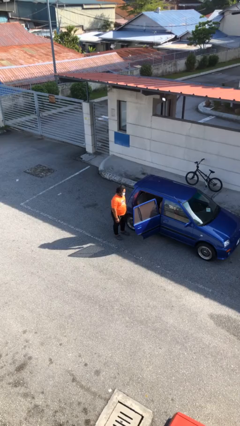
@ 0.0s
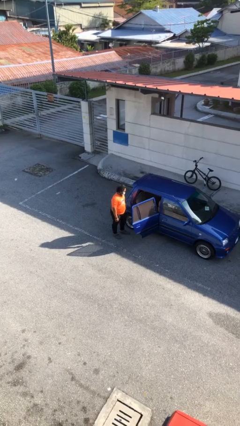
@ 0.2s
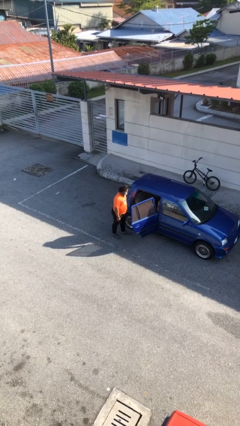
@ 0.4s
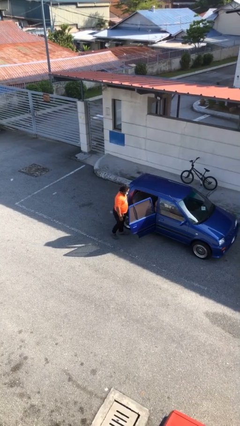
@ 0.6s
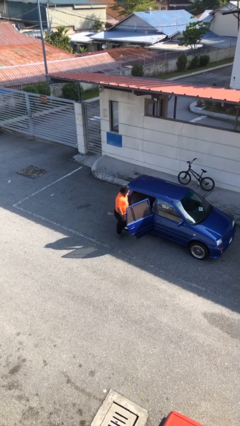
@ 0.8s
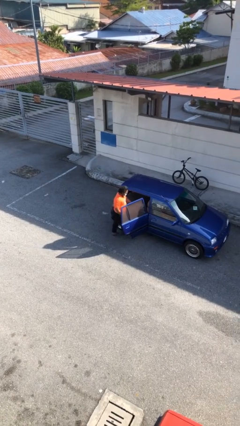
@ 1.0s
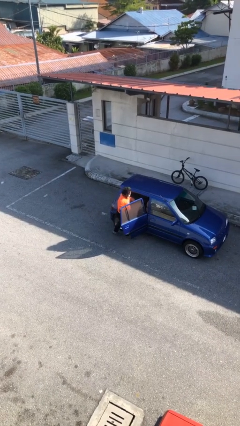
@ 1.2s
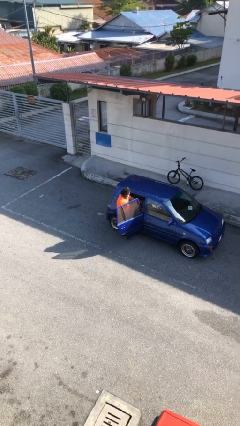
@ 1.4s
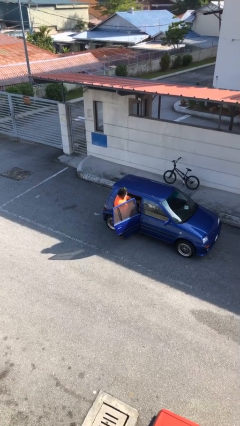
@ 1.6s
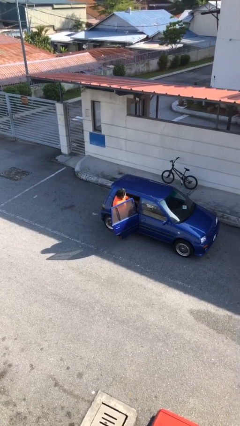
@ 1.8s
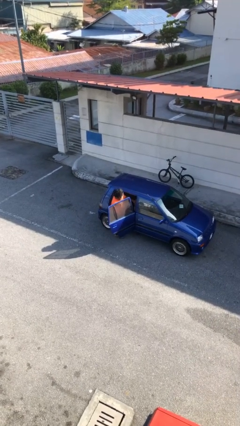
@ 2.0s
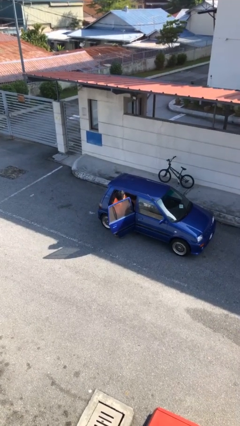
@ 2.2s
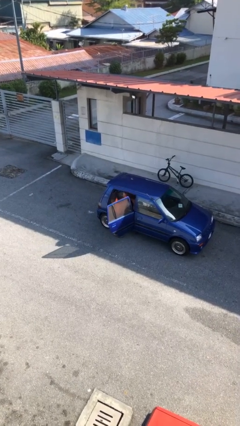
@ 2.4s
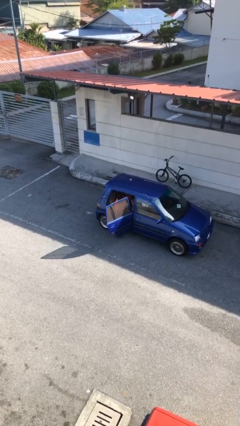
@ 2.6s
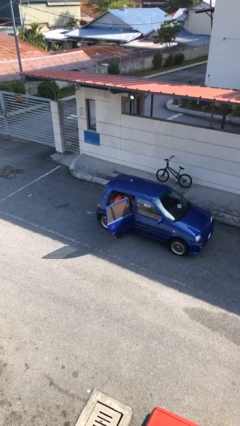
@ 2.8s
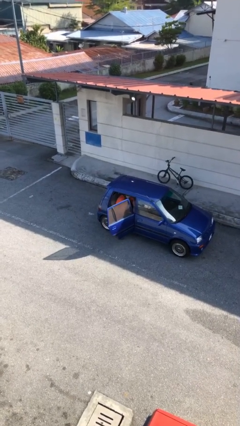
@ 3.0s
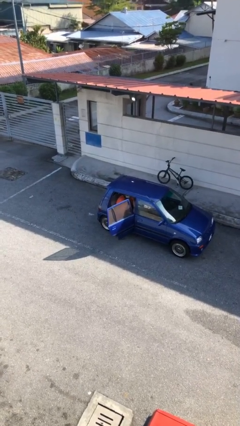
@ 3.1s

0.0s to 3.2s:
person enters car

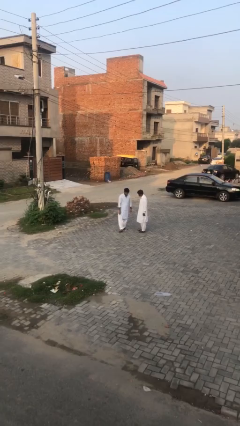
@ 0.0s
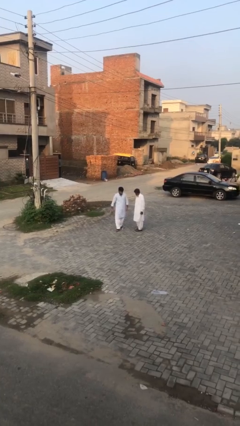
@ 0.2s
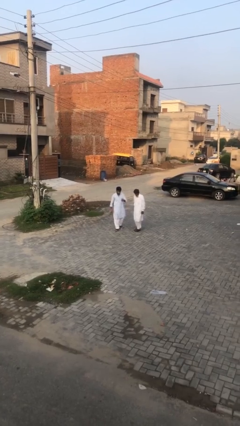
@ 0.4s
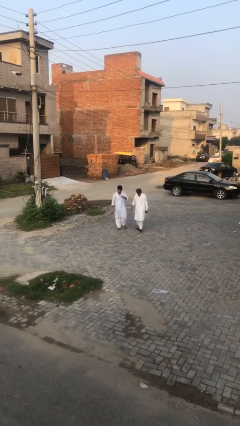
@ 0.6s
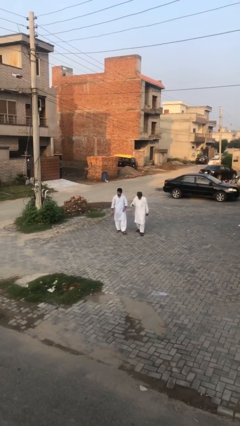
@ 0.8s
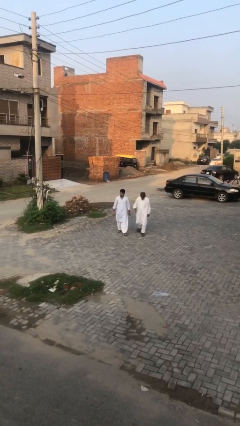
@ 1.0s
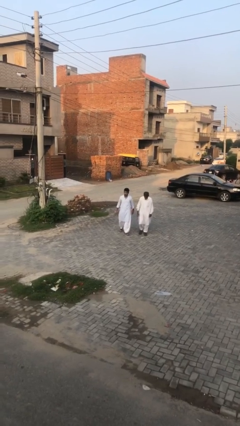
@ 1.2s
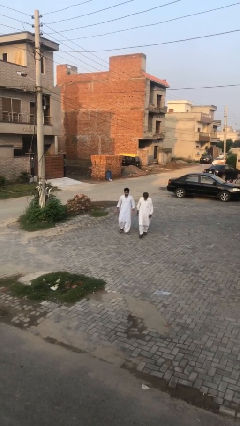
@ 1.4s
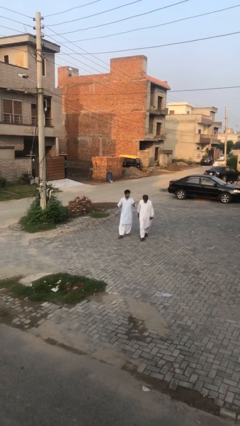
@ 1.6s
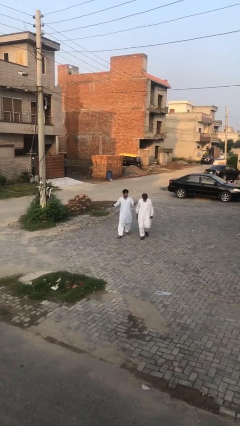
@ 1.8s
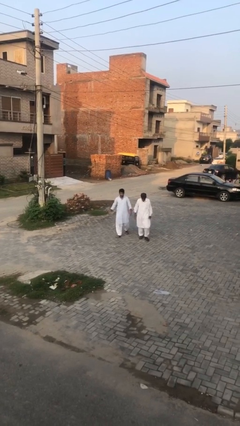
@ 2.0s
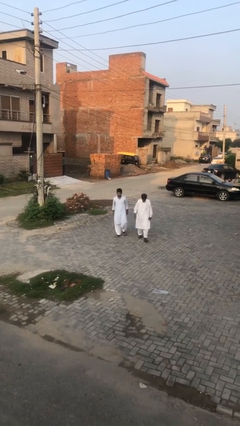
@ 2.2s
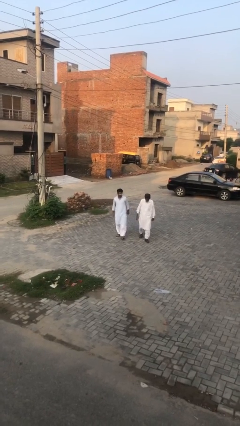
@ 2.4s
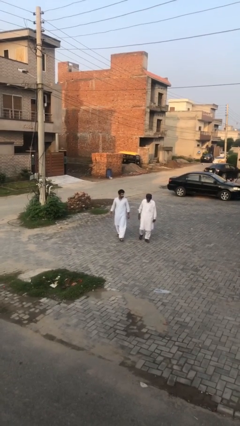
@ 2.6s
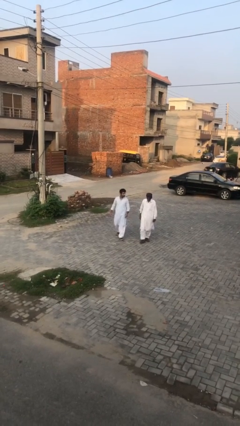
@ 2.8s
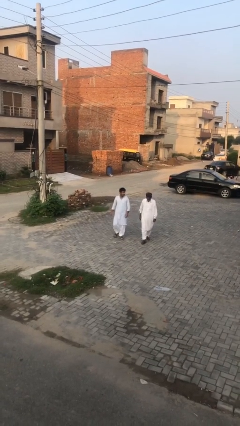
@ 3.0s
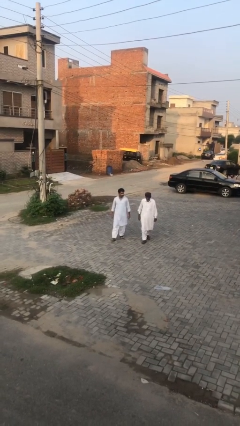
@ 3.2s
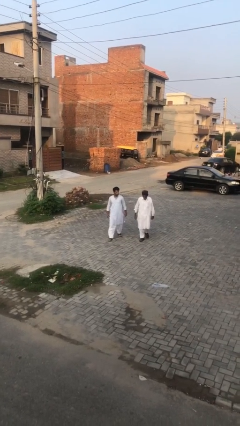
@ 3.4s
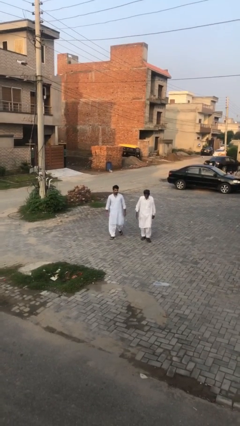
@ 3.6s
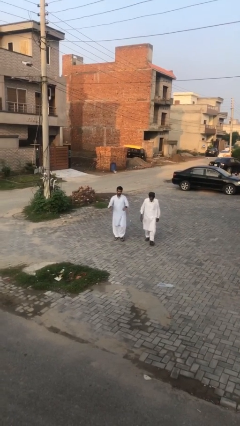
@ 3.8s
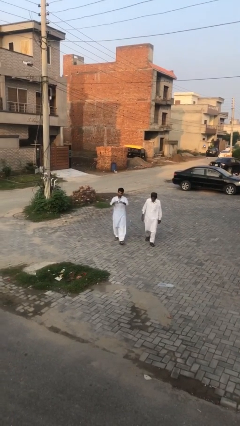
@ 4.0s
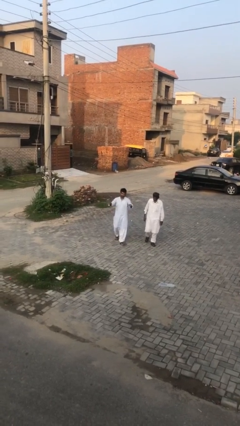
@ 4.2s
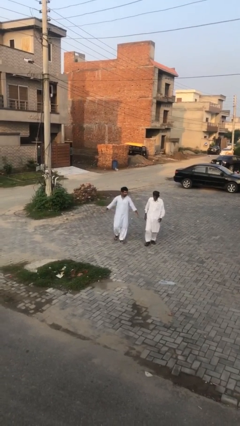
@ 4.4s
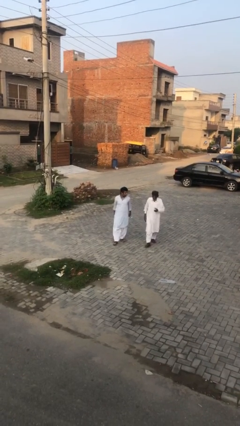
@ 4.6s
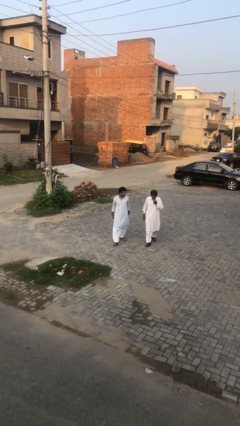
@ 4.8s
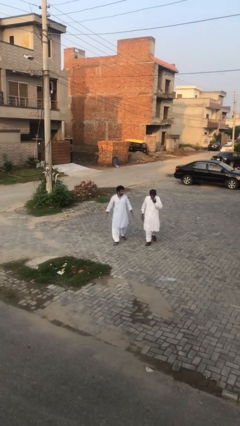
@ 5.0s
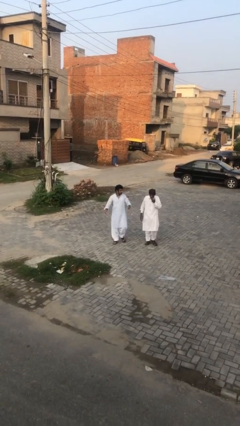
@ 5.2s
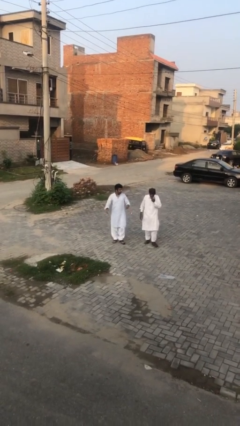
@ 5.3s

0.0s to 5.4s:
person talks to person

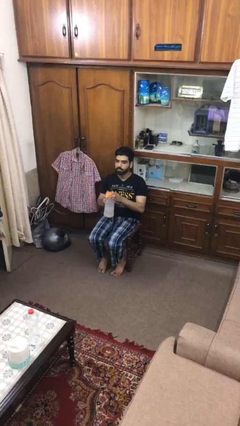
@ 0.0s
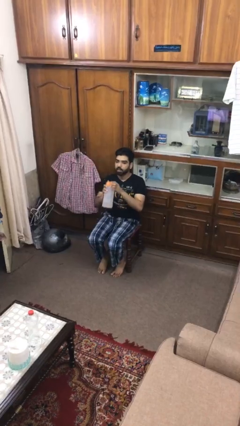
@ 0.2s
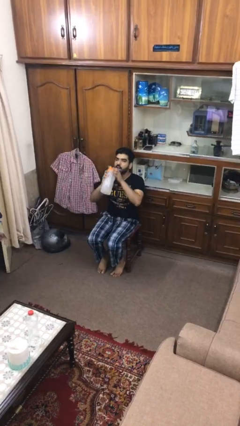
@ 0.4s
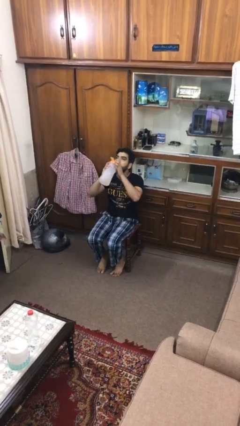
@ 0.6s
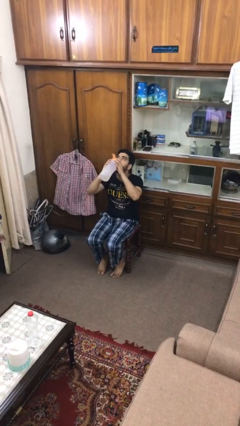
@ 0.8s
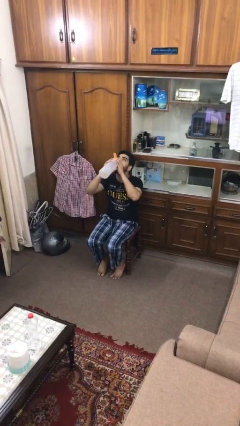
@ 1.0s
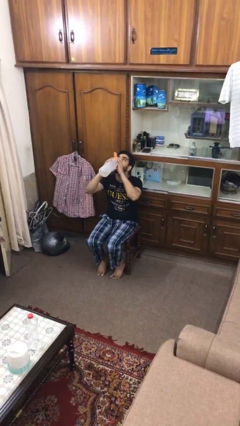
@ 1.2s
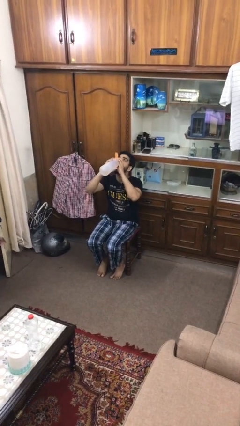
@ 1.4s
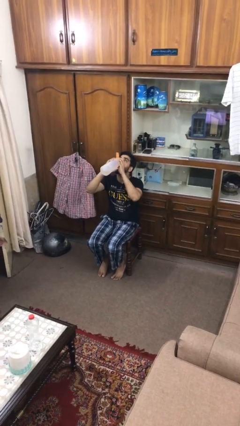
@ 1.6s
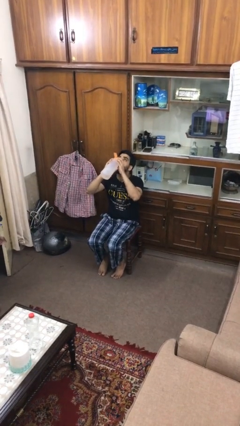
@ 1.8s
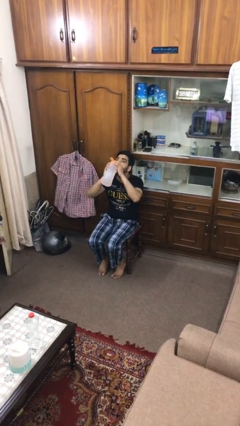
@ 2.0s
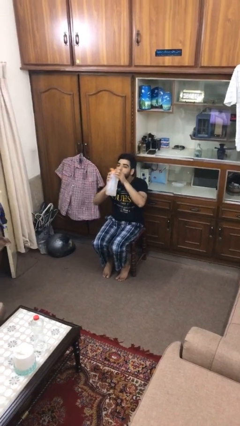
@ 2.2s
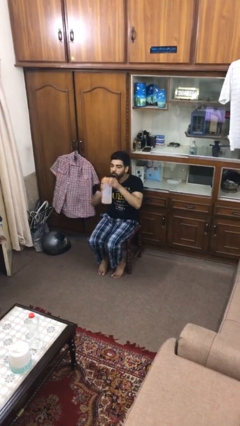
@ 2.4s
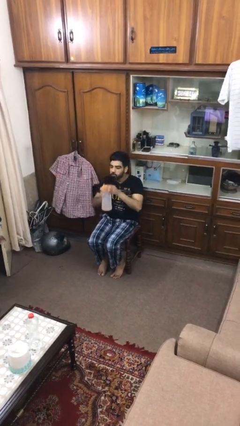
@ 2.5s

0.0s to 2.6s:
person drinks from bottle

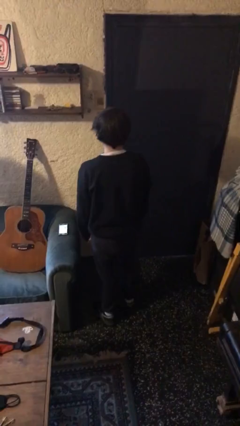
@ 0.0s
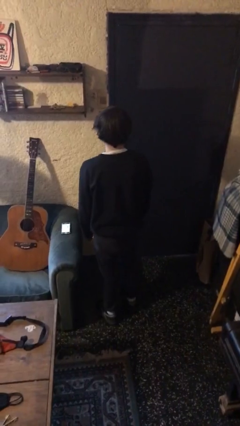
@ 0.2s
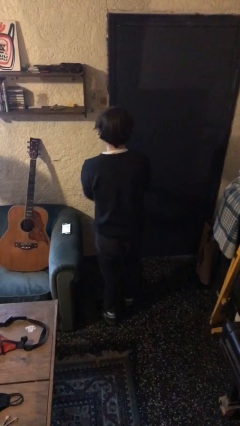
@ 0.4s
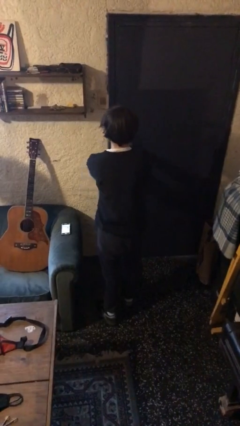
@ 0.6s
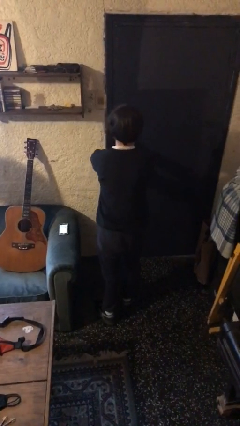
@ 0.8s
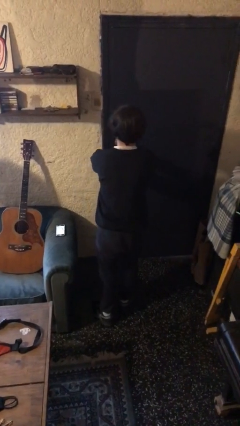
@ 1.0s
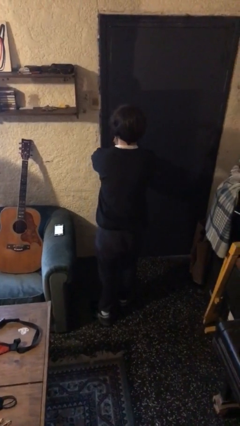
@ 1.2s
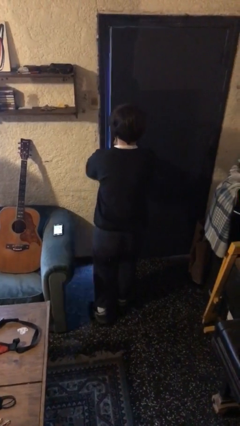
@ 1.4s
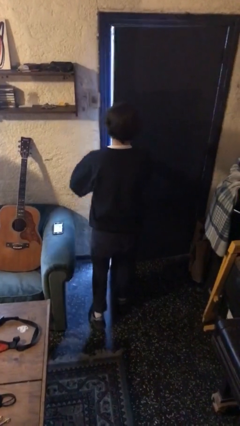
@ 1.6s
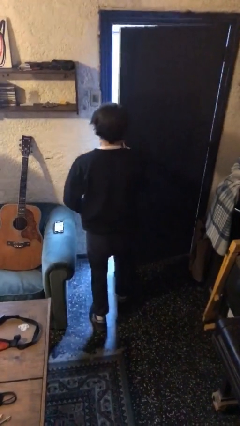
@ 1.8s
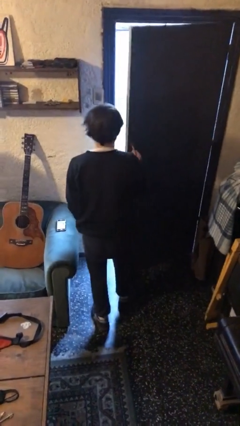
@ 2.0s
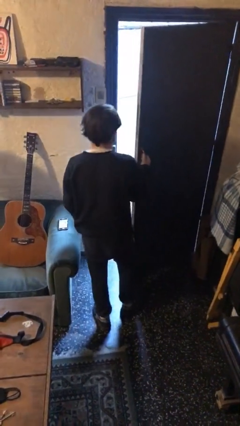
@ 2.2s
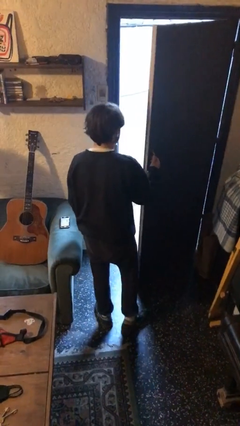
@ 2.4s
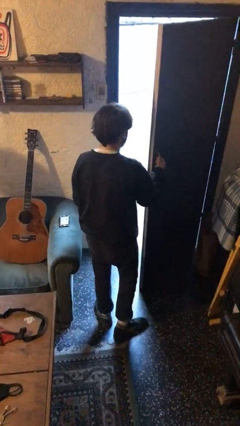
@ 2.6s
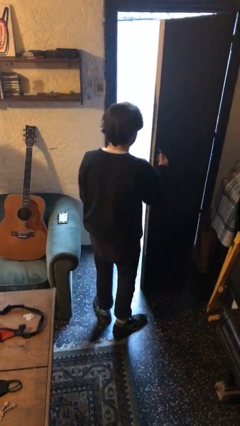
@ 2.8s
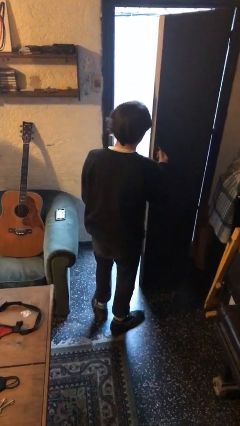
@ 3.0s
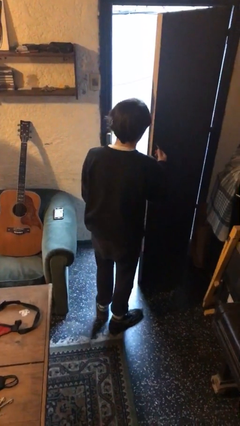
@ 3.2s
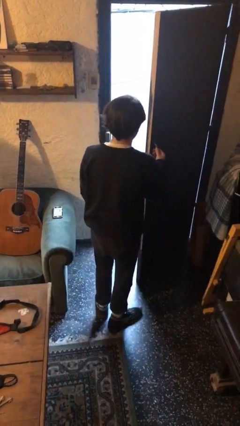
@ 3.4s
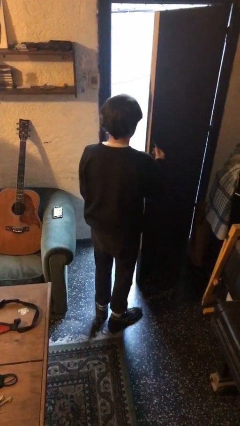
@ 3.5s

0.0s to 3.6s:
person opens facility door

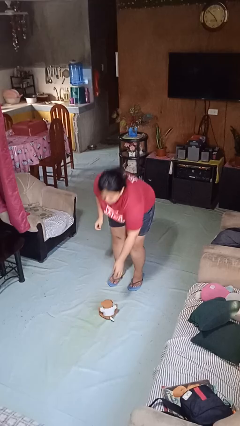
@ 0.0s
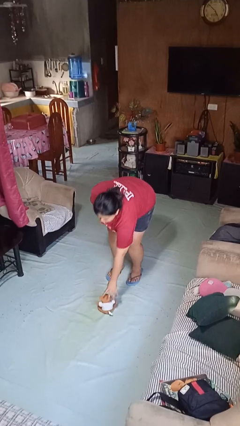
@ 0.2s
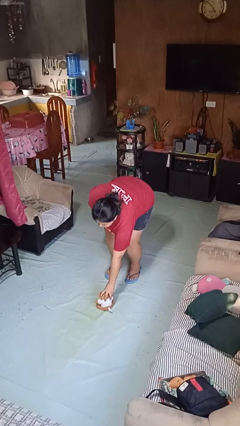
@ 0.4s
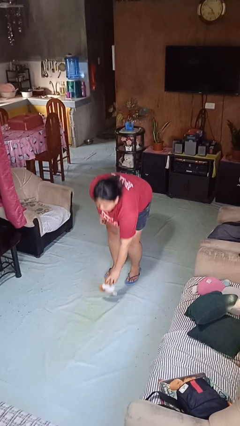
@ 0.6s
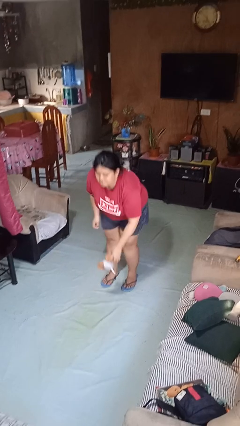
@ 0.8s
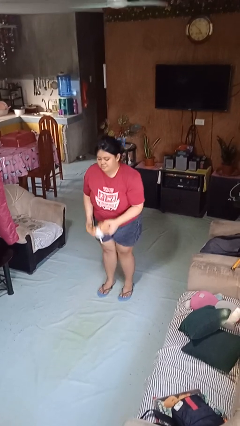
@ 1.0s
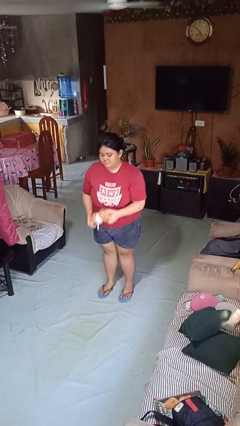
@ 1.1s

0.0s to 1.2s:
person picks up object from floor

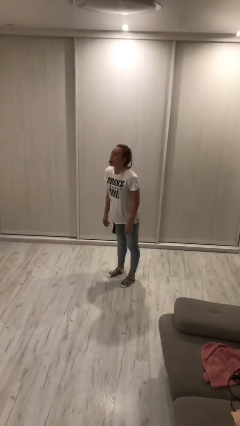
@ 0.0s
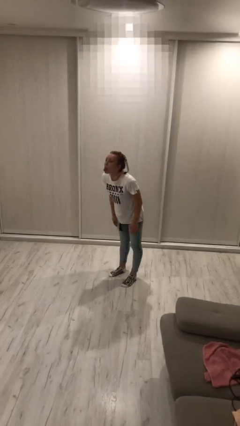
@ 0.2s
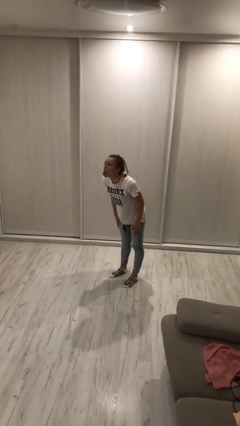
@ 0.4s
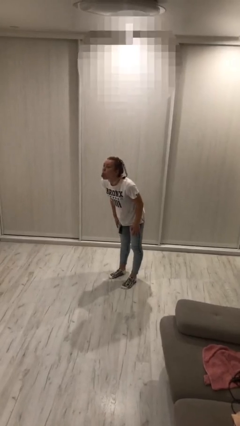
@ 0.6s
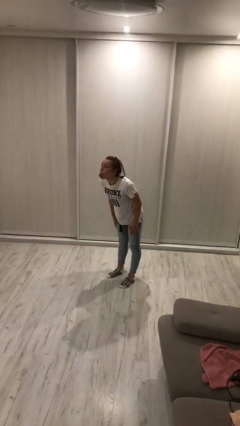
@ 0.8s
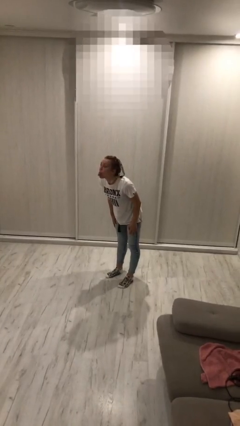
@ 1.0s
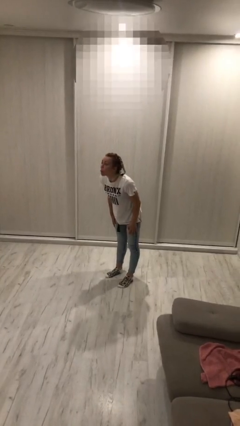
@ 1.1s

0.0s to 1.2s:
person sticks out tongue

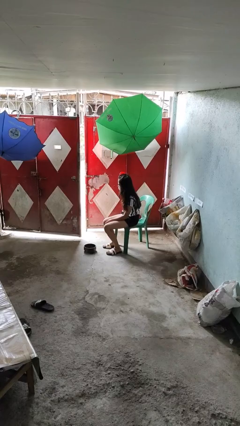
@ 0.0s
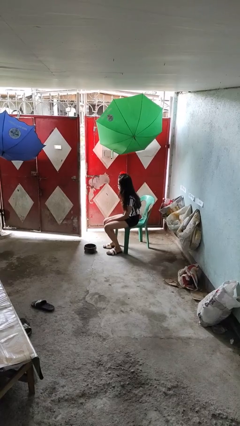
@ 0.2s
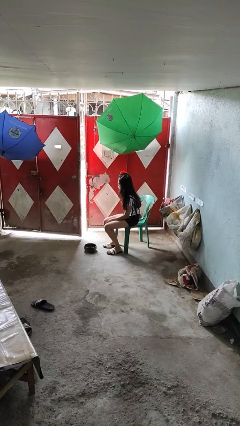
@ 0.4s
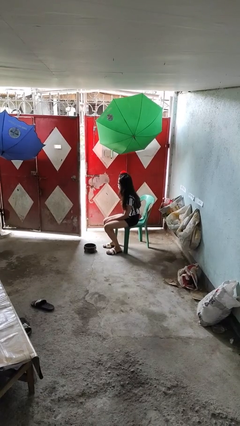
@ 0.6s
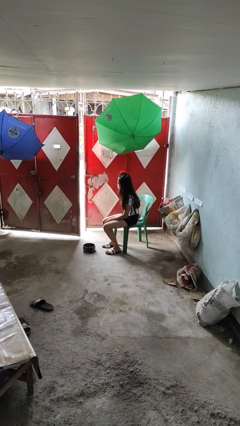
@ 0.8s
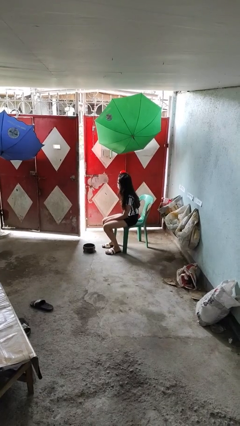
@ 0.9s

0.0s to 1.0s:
person puts phone into pocket
